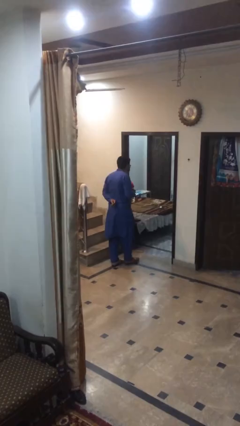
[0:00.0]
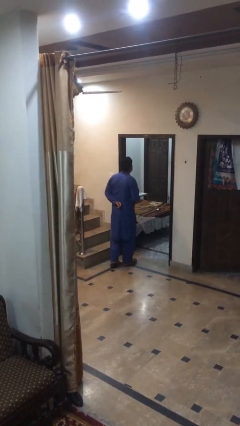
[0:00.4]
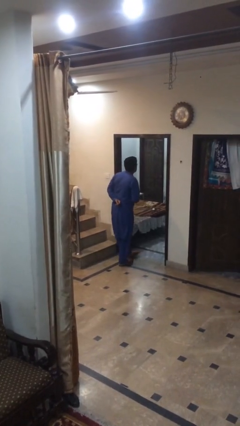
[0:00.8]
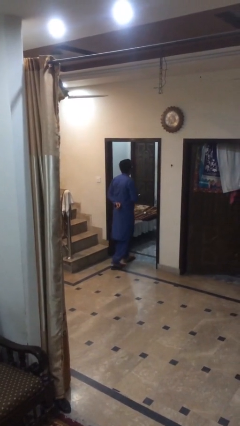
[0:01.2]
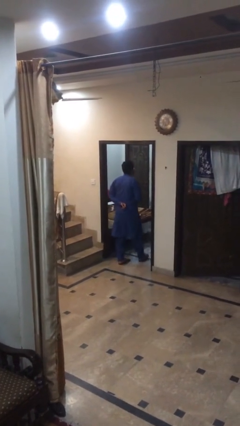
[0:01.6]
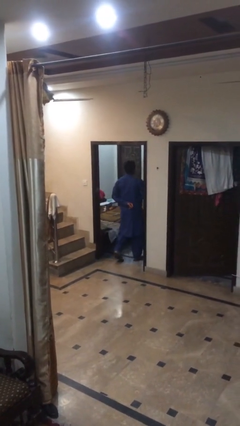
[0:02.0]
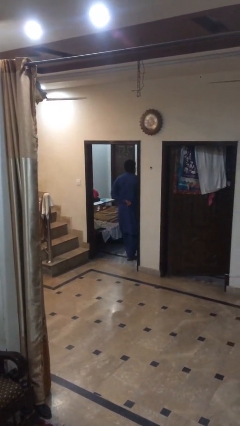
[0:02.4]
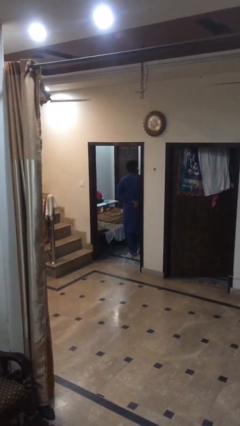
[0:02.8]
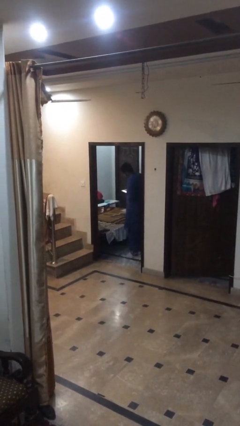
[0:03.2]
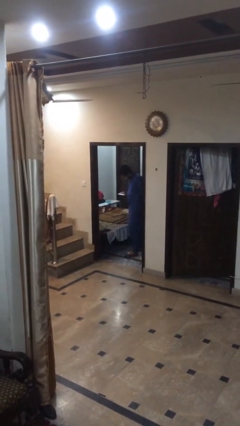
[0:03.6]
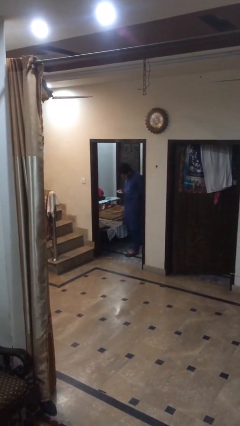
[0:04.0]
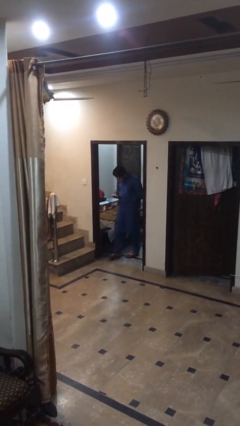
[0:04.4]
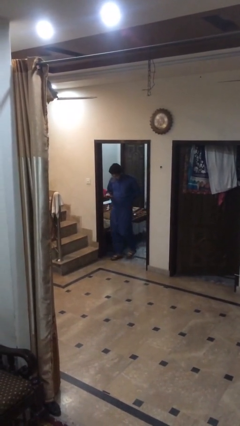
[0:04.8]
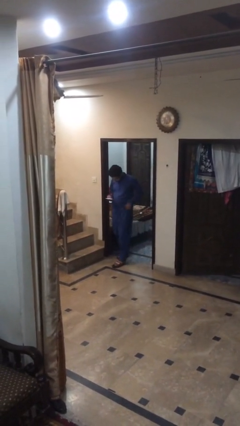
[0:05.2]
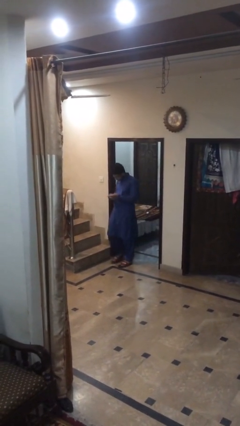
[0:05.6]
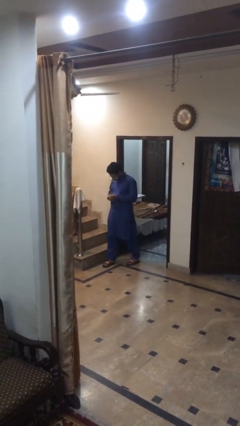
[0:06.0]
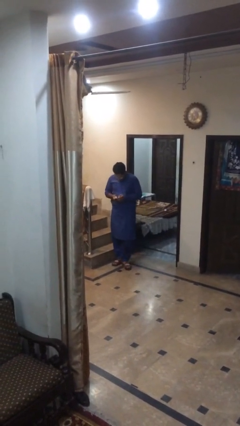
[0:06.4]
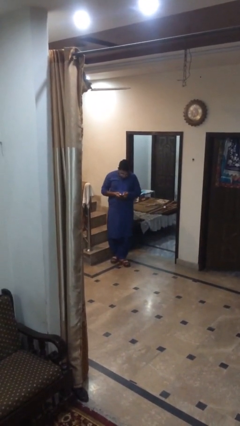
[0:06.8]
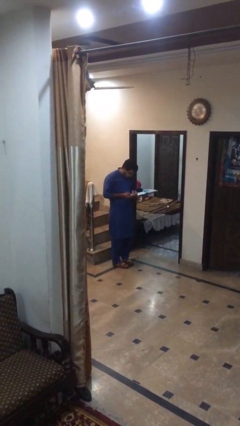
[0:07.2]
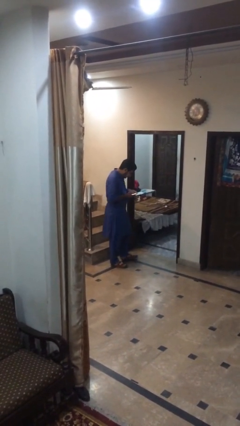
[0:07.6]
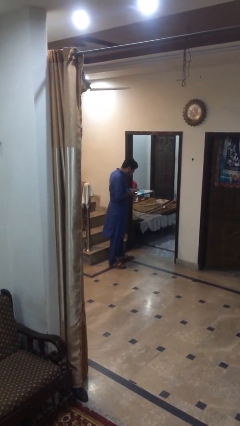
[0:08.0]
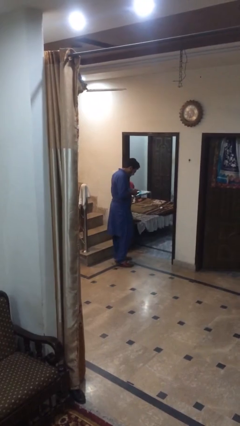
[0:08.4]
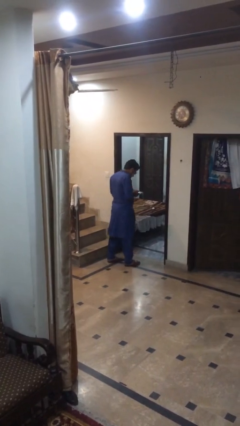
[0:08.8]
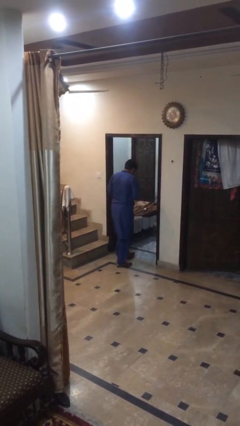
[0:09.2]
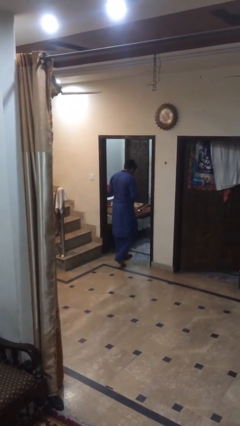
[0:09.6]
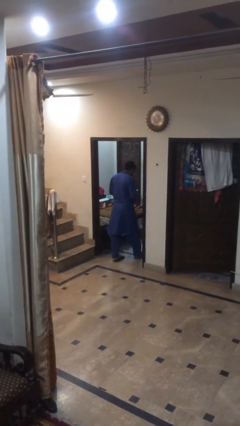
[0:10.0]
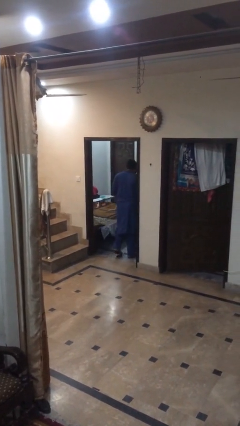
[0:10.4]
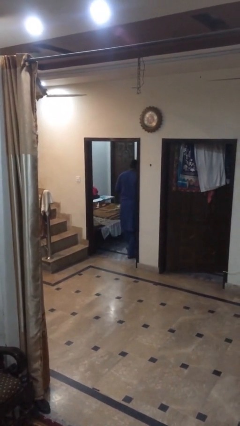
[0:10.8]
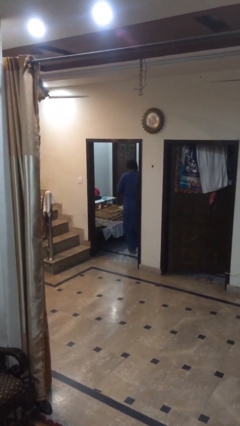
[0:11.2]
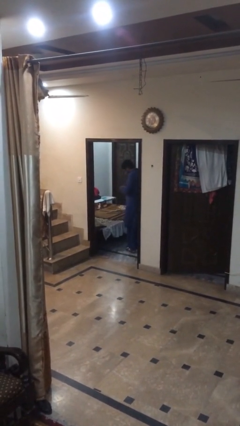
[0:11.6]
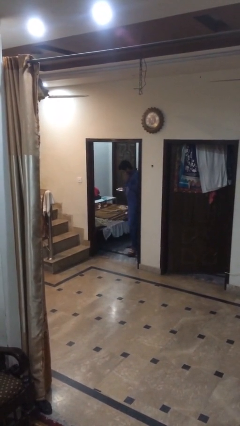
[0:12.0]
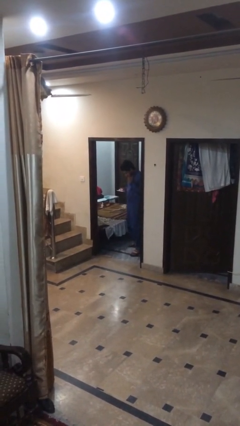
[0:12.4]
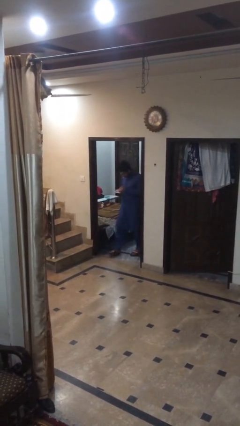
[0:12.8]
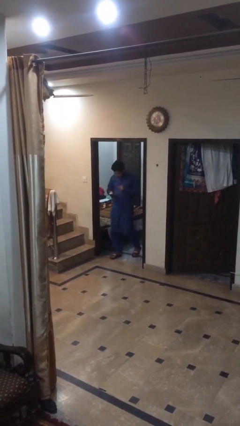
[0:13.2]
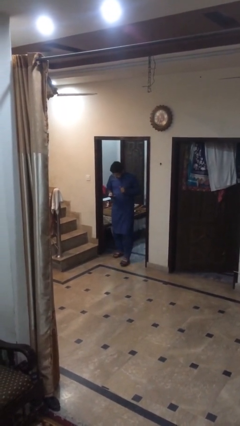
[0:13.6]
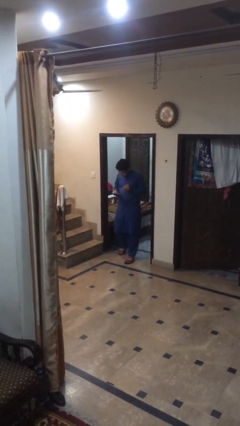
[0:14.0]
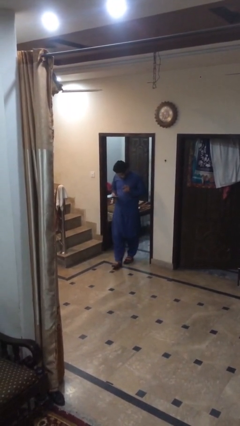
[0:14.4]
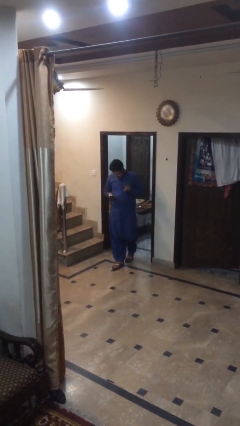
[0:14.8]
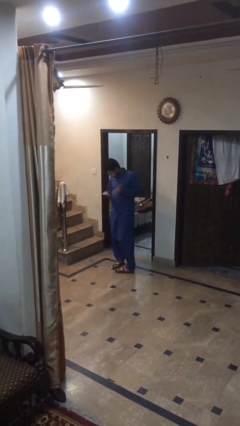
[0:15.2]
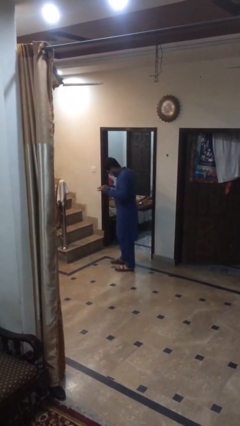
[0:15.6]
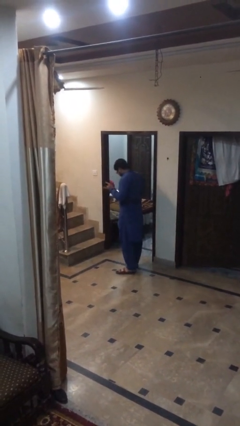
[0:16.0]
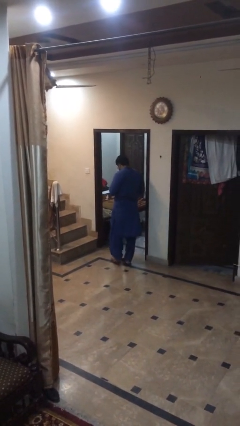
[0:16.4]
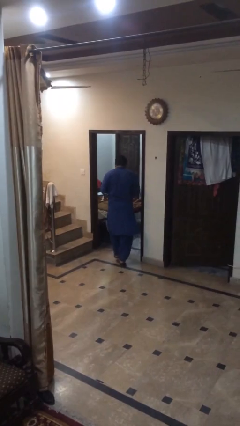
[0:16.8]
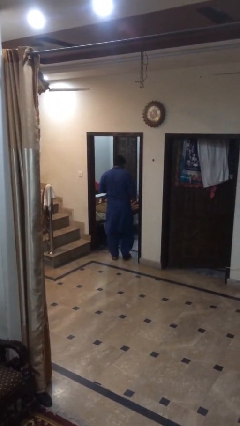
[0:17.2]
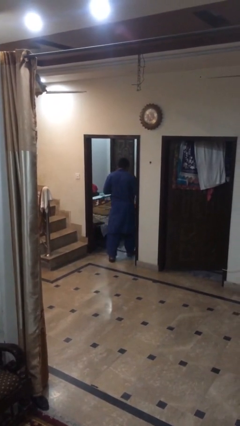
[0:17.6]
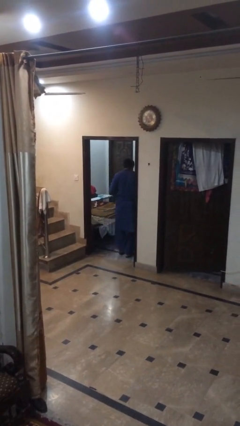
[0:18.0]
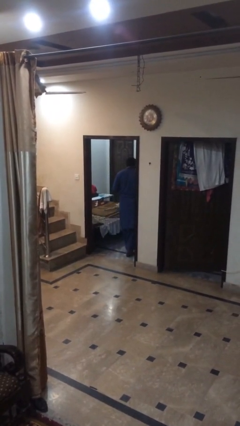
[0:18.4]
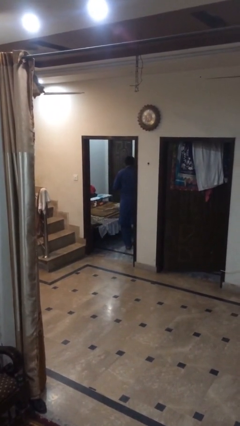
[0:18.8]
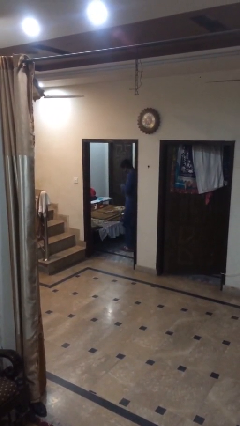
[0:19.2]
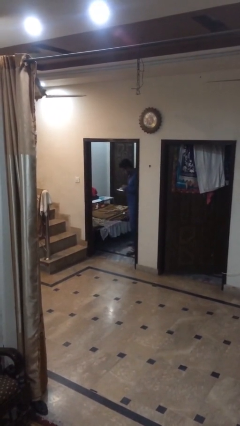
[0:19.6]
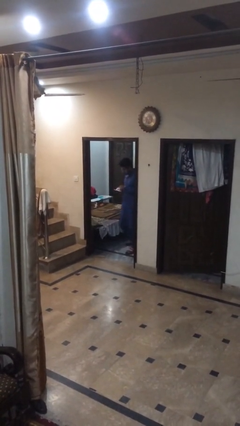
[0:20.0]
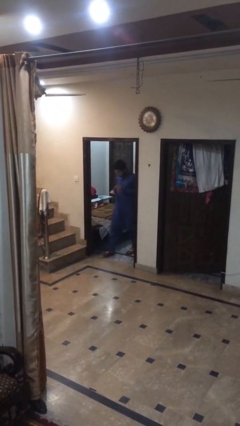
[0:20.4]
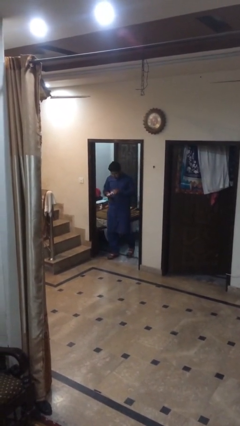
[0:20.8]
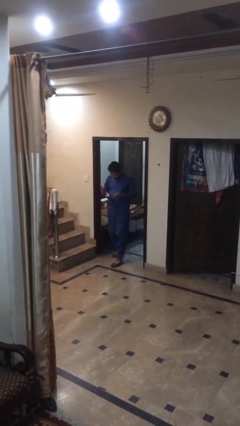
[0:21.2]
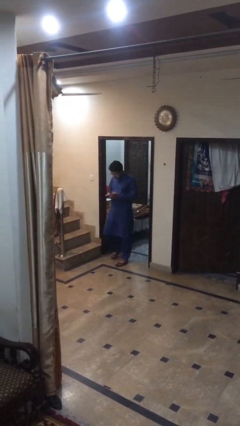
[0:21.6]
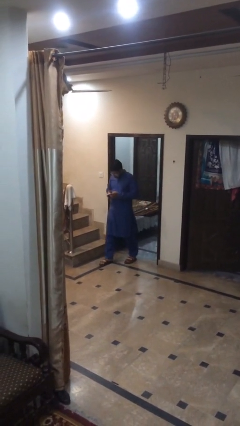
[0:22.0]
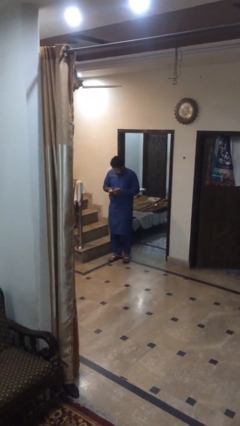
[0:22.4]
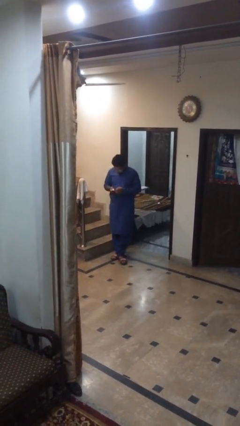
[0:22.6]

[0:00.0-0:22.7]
person texts on phone

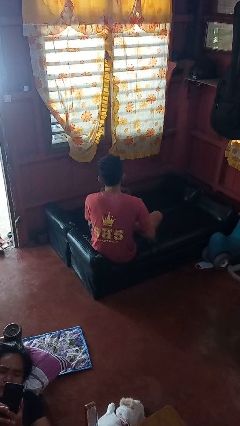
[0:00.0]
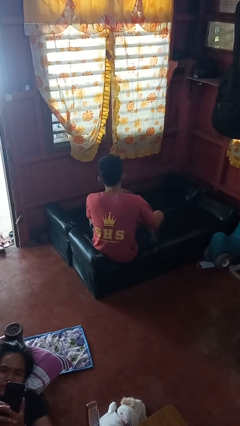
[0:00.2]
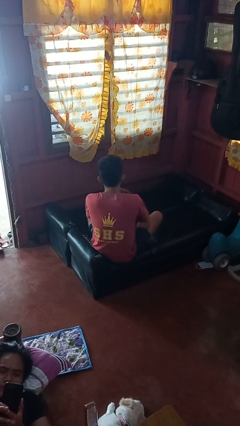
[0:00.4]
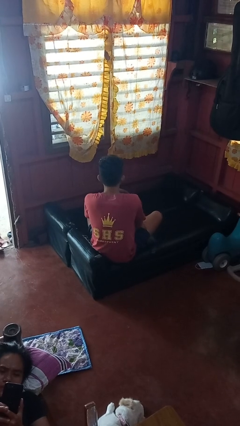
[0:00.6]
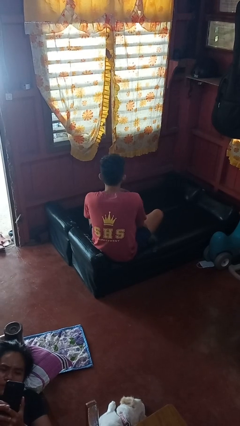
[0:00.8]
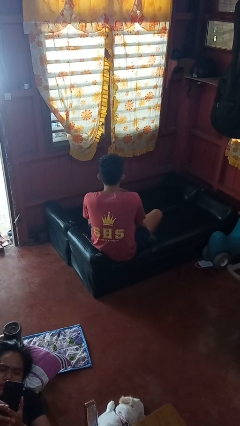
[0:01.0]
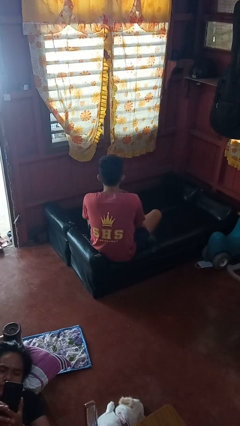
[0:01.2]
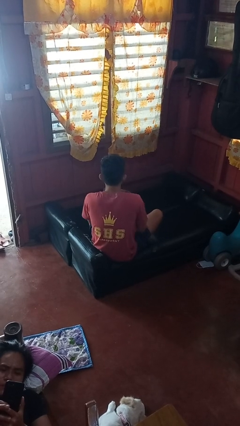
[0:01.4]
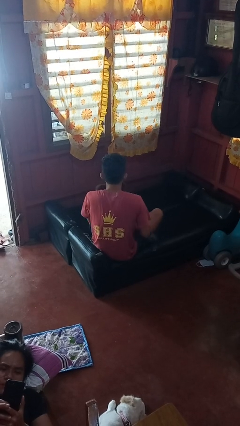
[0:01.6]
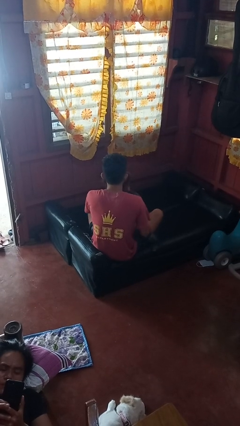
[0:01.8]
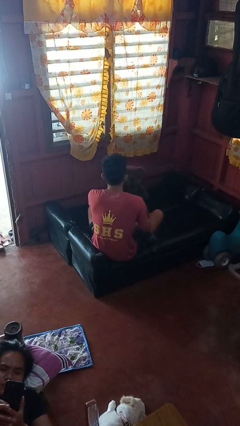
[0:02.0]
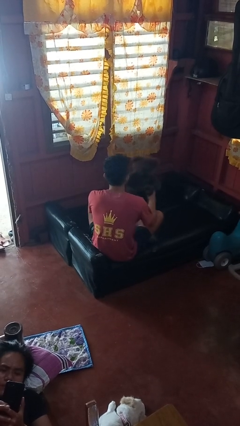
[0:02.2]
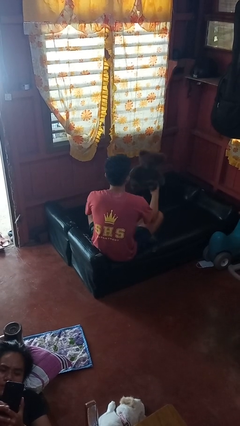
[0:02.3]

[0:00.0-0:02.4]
person hugs stuffed animal

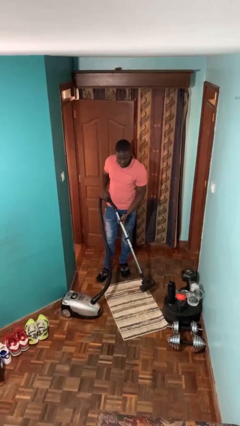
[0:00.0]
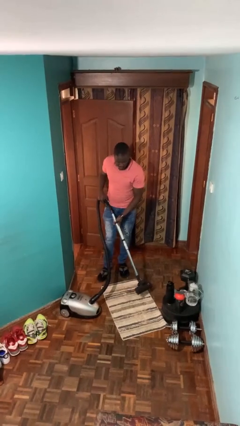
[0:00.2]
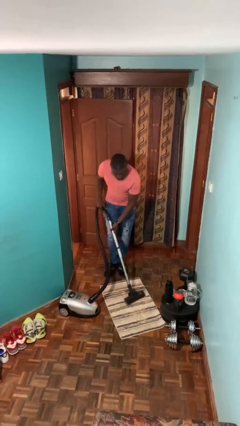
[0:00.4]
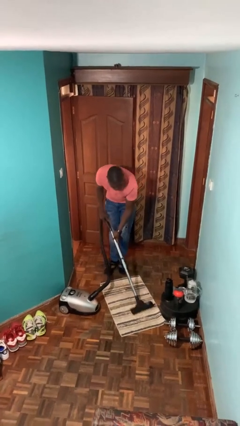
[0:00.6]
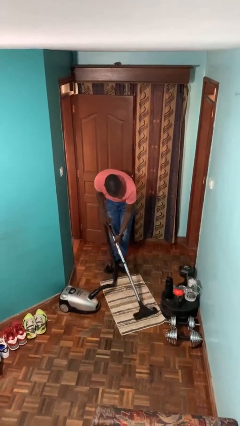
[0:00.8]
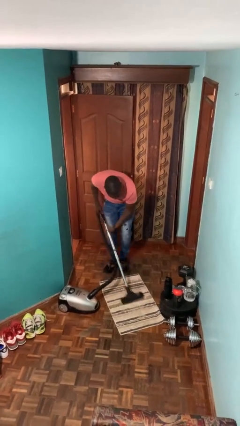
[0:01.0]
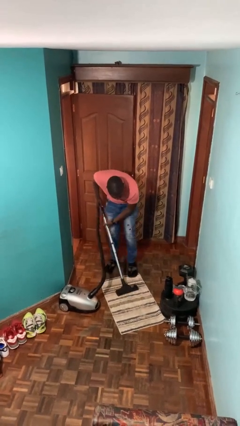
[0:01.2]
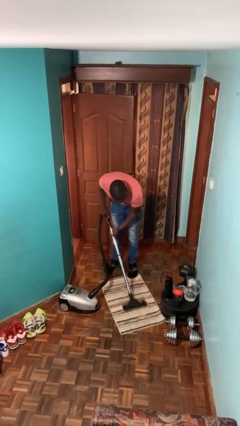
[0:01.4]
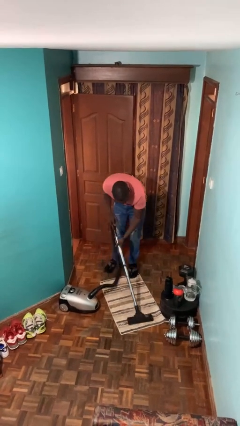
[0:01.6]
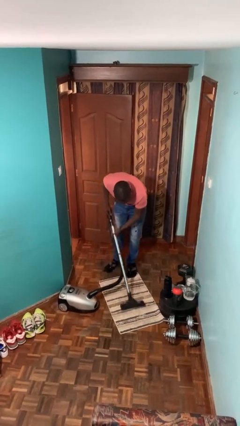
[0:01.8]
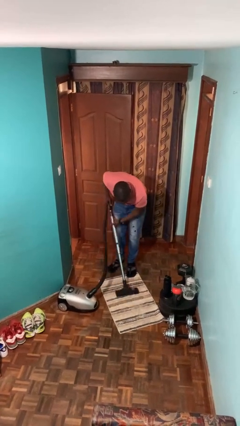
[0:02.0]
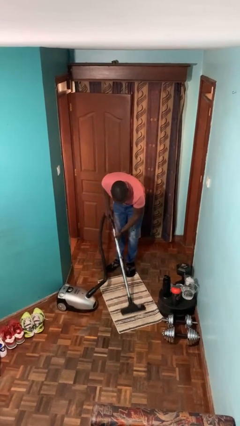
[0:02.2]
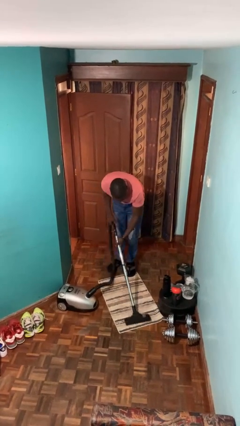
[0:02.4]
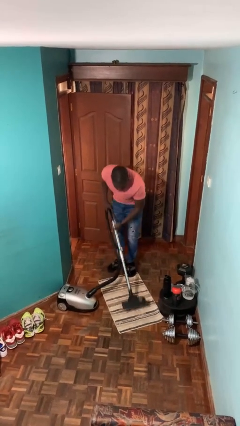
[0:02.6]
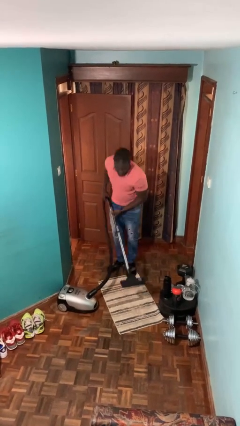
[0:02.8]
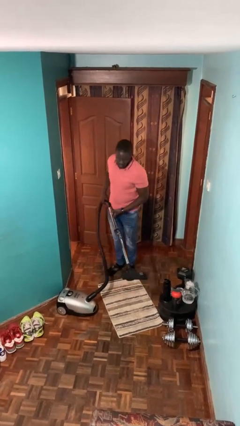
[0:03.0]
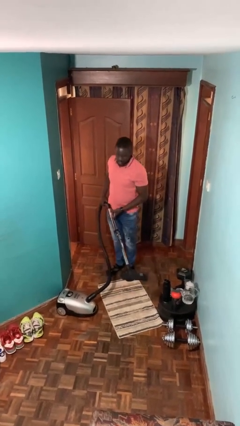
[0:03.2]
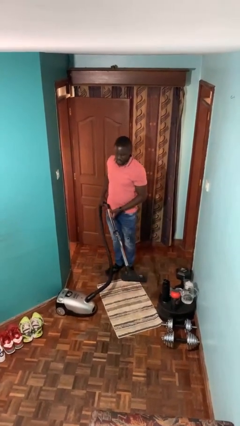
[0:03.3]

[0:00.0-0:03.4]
person vacuums carpet

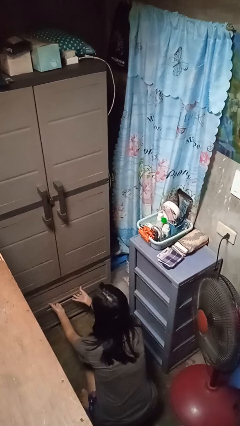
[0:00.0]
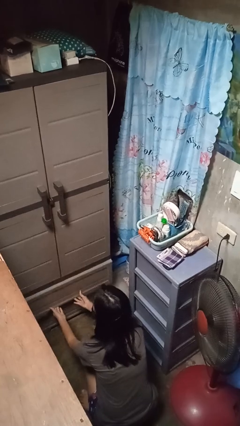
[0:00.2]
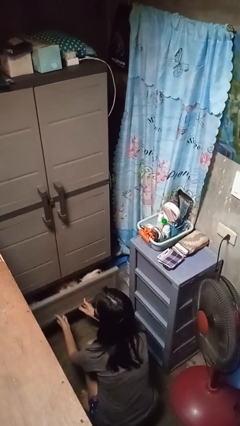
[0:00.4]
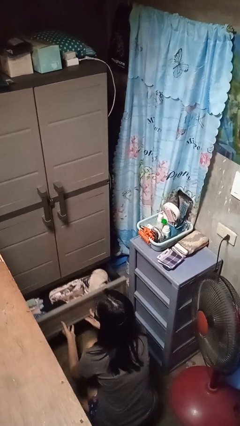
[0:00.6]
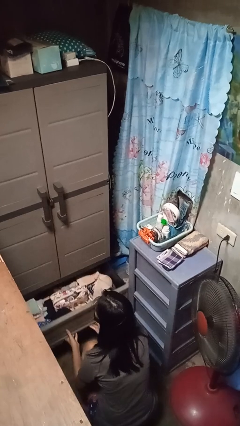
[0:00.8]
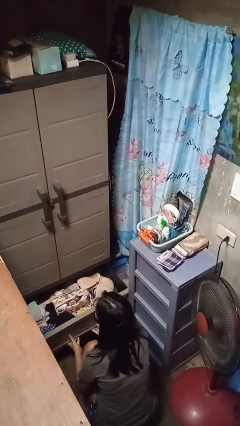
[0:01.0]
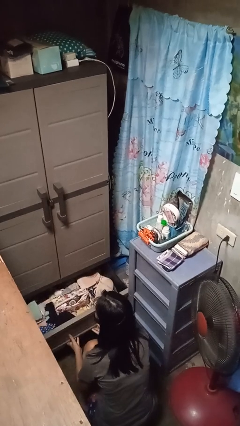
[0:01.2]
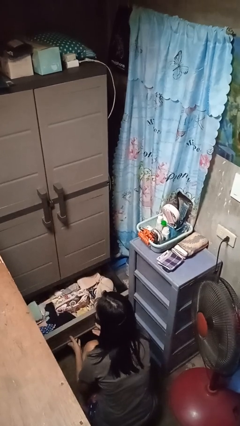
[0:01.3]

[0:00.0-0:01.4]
person opens dresser drawer
